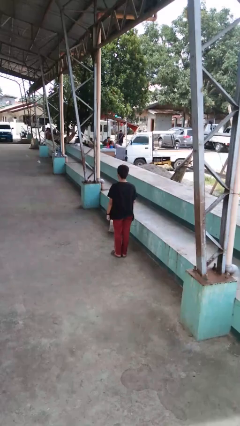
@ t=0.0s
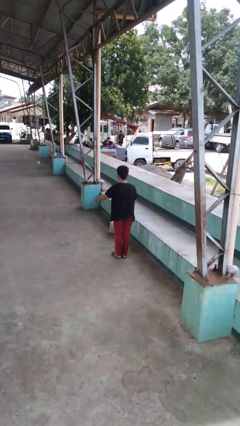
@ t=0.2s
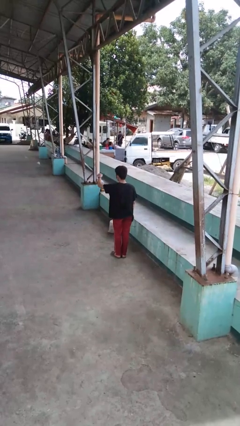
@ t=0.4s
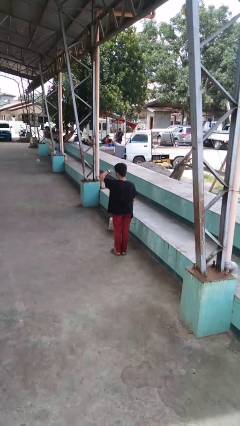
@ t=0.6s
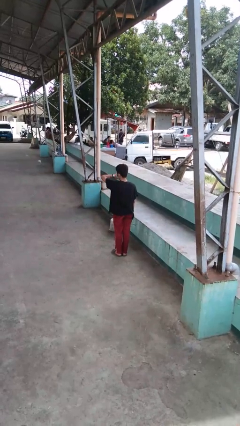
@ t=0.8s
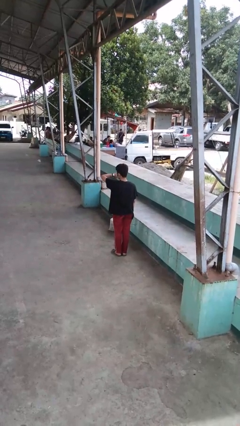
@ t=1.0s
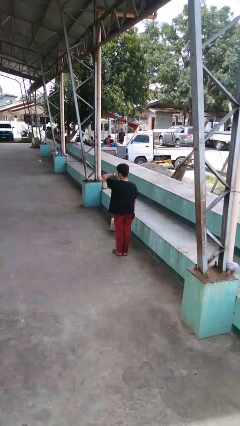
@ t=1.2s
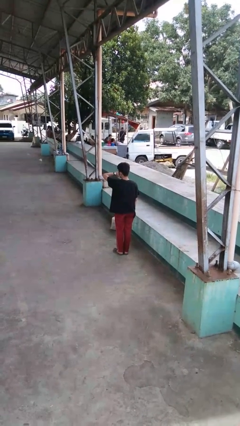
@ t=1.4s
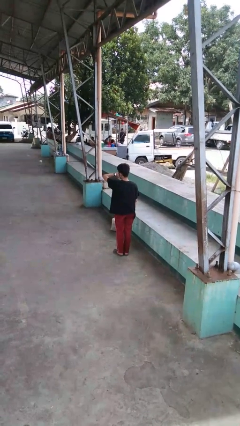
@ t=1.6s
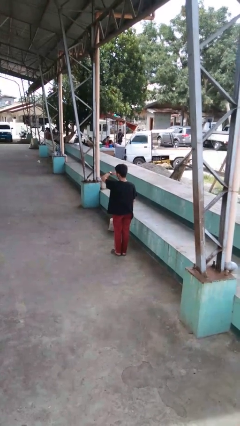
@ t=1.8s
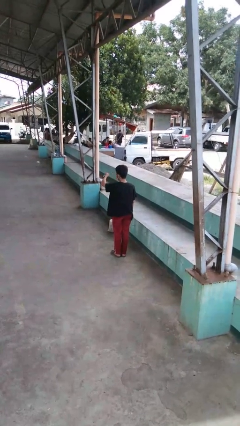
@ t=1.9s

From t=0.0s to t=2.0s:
person looks at wristwatch

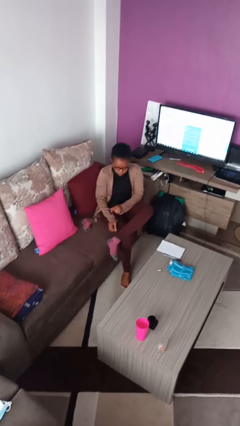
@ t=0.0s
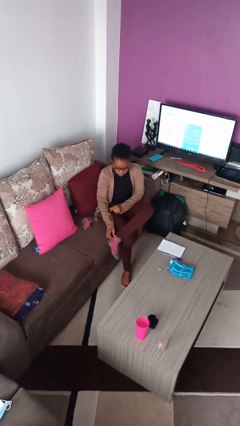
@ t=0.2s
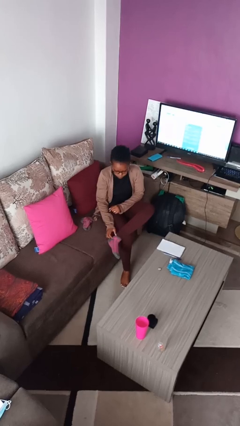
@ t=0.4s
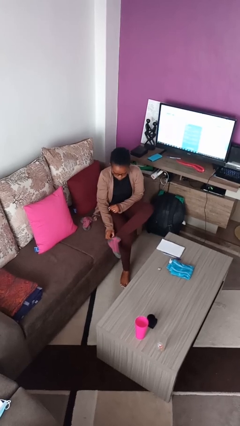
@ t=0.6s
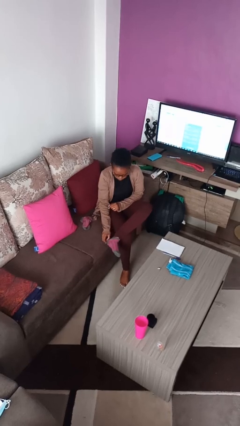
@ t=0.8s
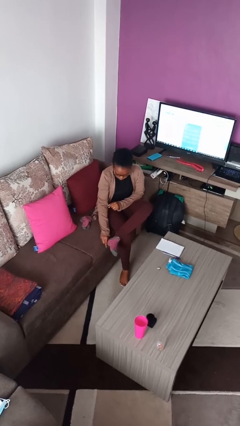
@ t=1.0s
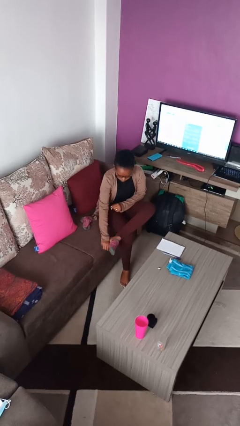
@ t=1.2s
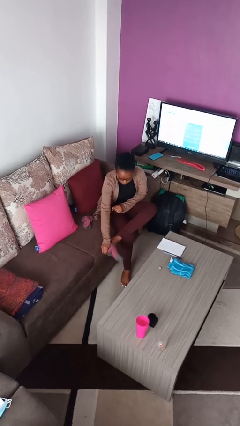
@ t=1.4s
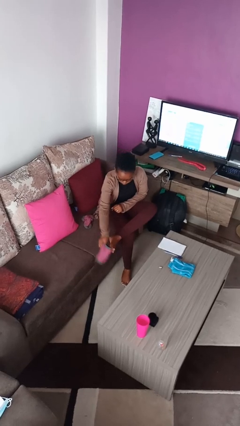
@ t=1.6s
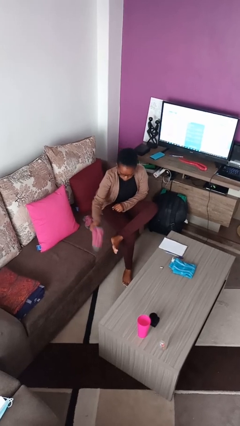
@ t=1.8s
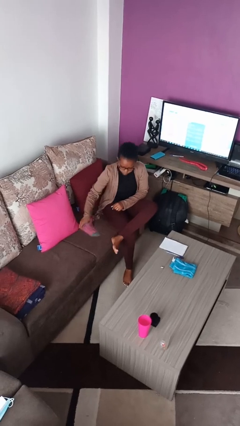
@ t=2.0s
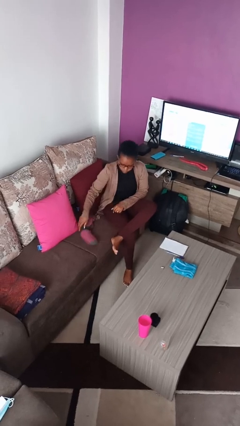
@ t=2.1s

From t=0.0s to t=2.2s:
person takes off socks

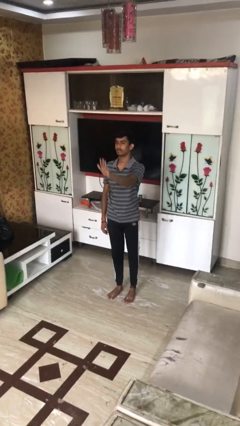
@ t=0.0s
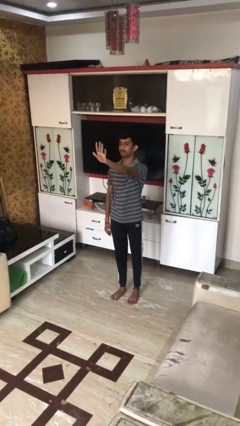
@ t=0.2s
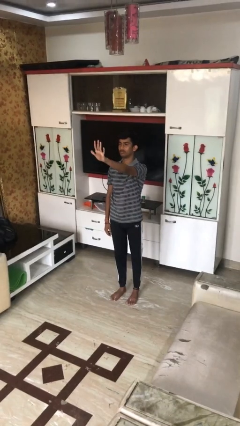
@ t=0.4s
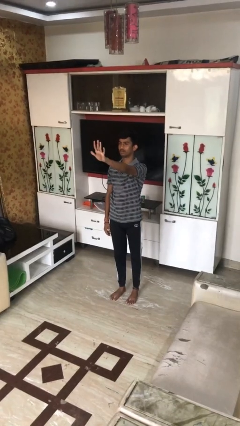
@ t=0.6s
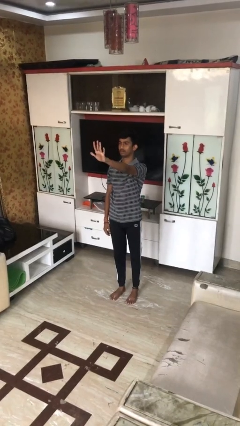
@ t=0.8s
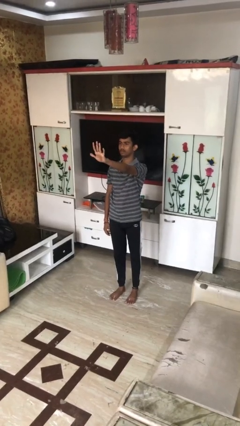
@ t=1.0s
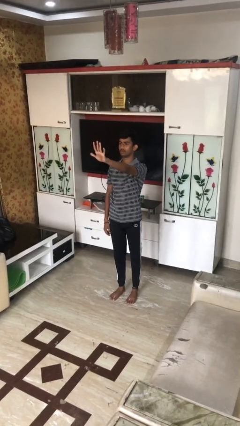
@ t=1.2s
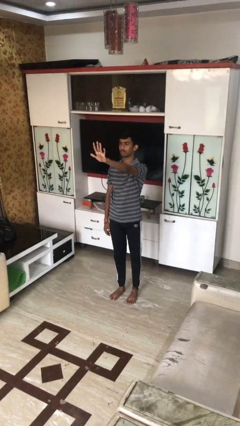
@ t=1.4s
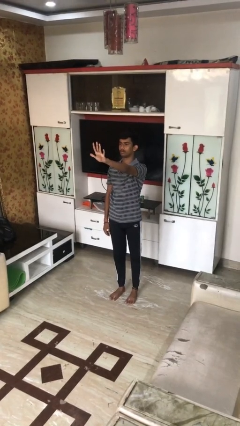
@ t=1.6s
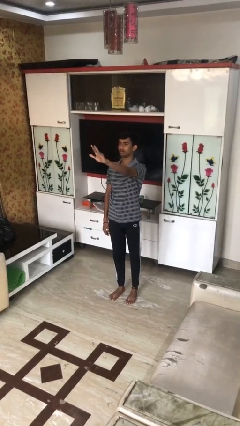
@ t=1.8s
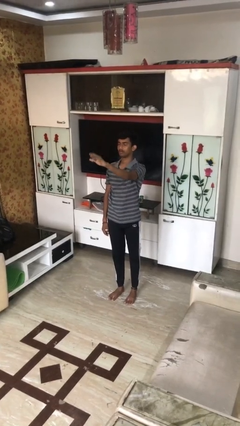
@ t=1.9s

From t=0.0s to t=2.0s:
person gestures number five

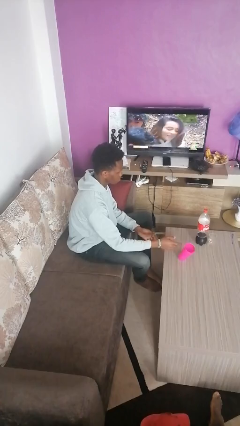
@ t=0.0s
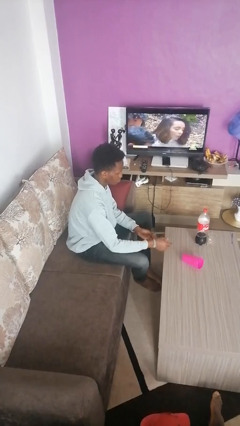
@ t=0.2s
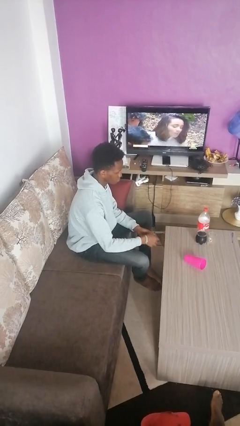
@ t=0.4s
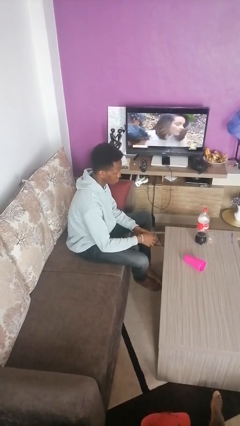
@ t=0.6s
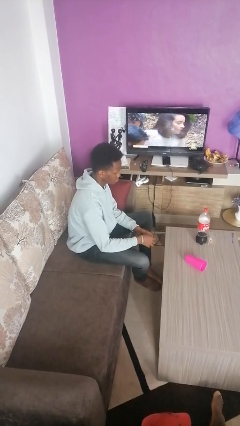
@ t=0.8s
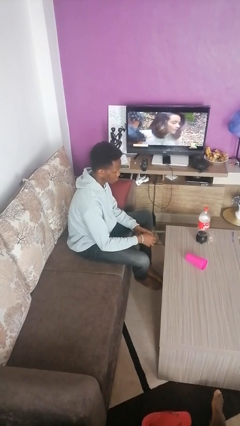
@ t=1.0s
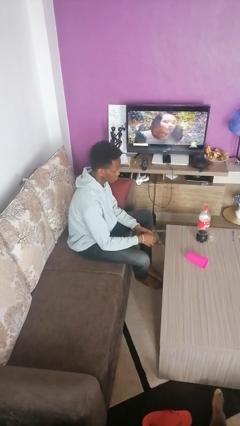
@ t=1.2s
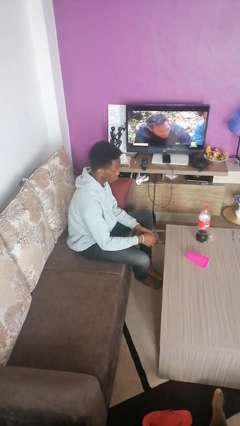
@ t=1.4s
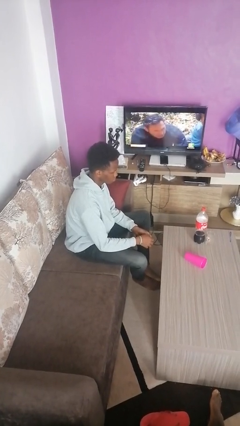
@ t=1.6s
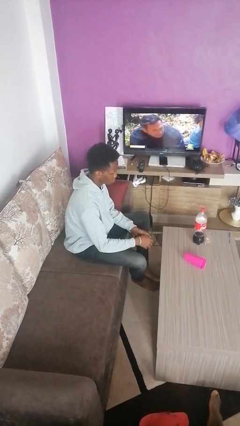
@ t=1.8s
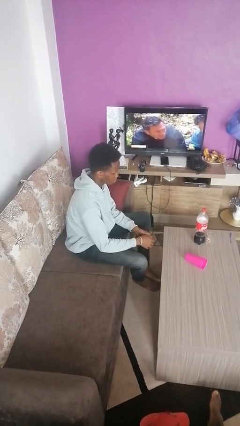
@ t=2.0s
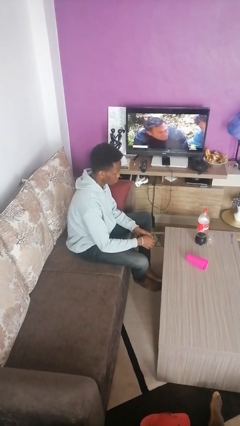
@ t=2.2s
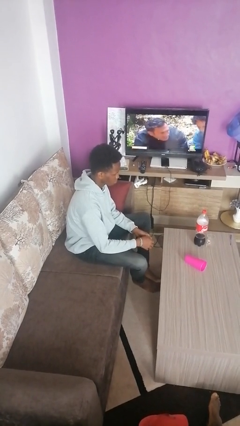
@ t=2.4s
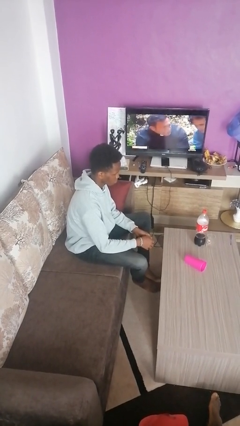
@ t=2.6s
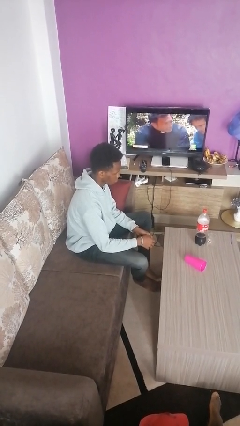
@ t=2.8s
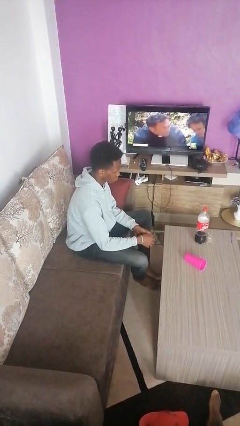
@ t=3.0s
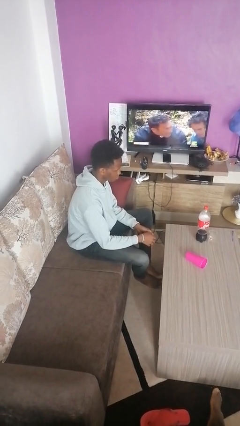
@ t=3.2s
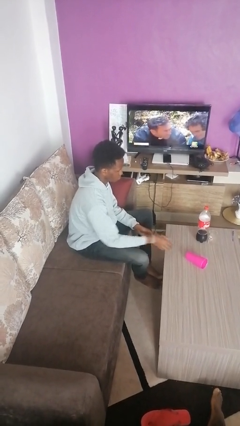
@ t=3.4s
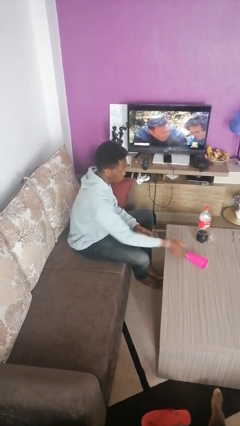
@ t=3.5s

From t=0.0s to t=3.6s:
person knocks over glass

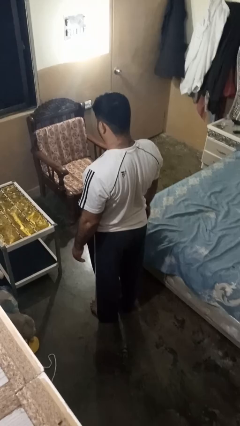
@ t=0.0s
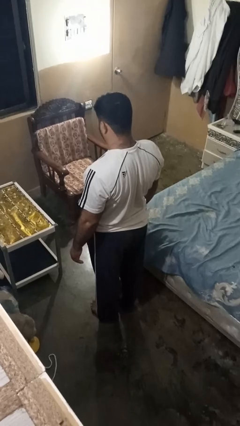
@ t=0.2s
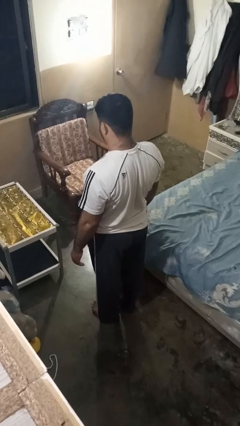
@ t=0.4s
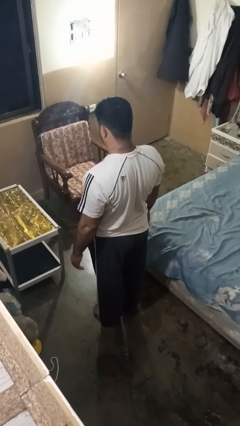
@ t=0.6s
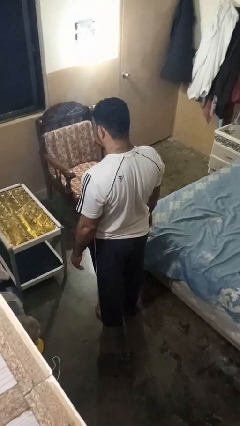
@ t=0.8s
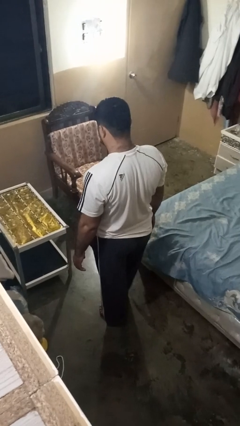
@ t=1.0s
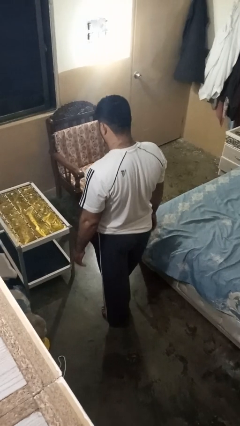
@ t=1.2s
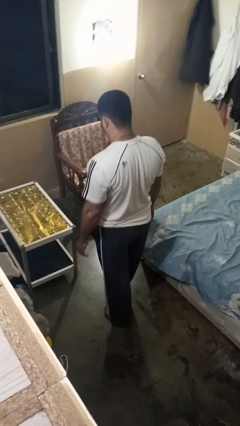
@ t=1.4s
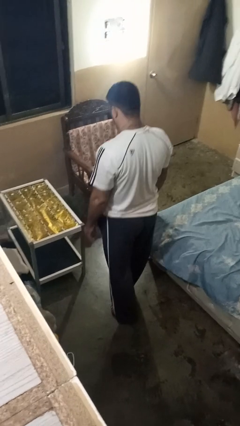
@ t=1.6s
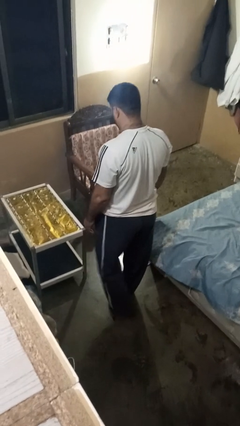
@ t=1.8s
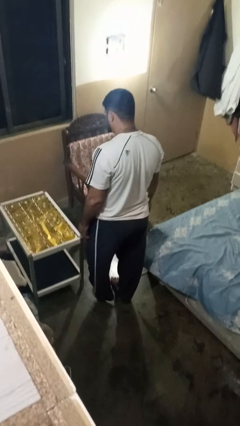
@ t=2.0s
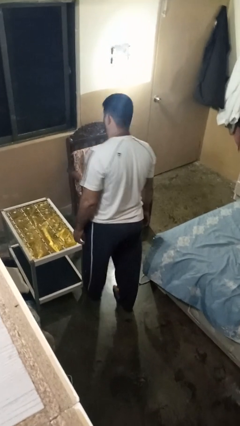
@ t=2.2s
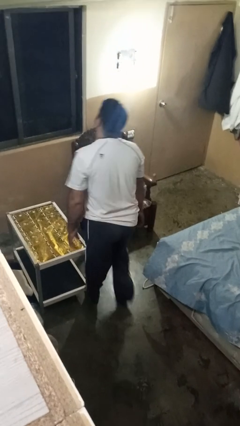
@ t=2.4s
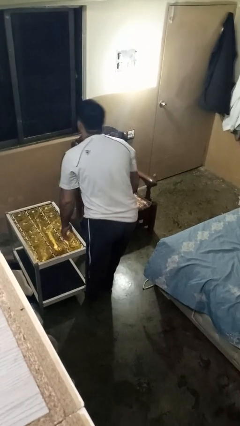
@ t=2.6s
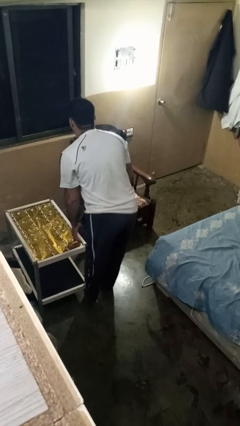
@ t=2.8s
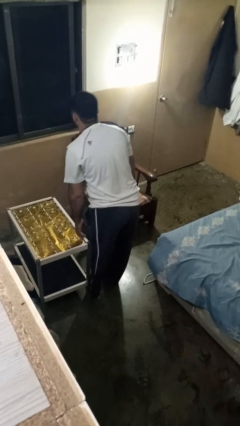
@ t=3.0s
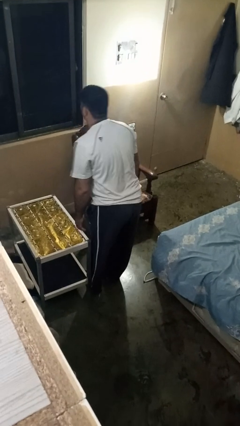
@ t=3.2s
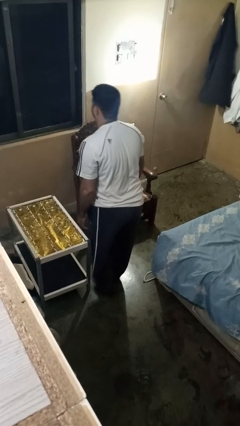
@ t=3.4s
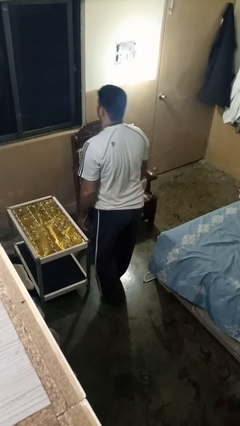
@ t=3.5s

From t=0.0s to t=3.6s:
person bumps into table

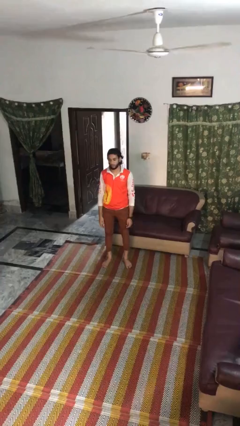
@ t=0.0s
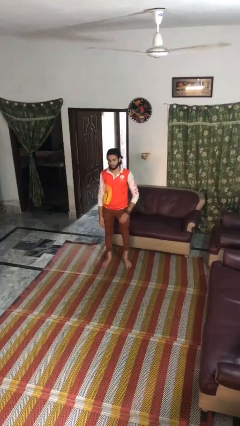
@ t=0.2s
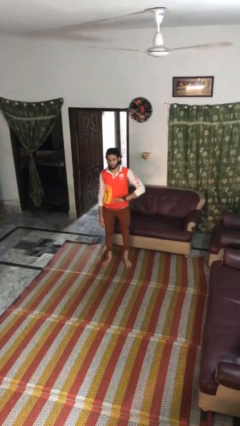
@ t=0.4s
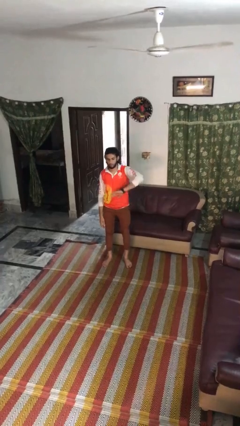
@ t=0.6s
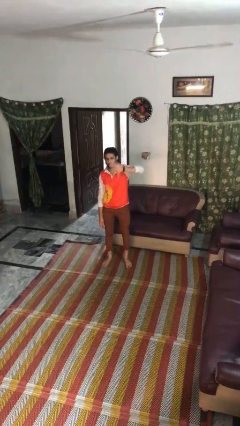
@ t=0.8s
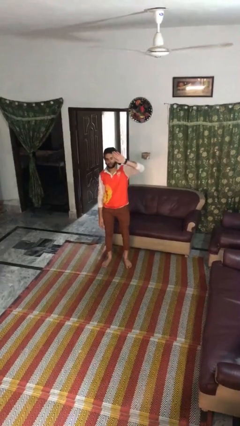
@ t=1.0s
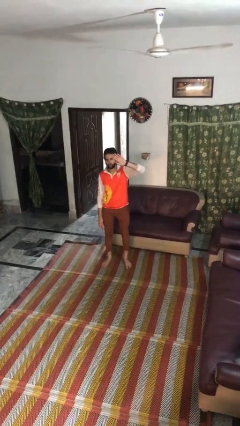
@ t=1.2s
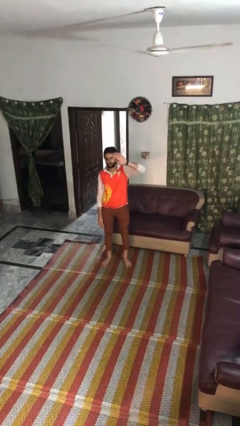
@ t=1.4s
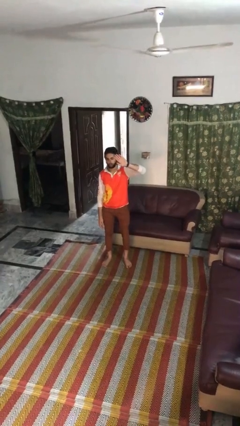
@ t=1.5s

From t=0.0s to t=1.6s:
person gestures swipe up

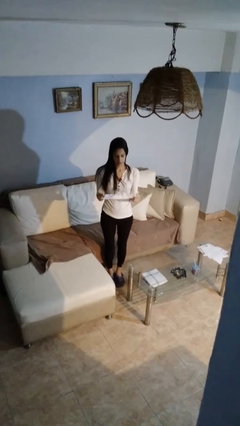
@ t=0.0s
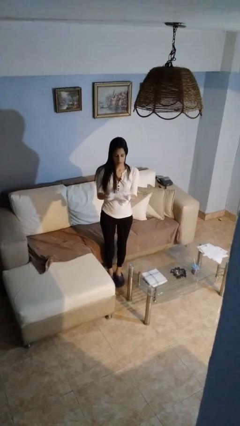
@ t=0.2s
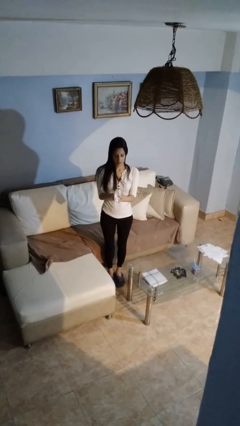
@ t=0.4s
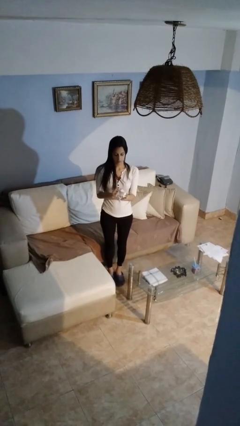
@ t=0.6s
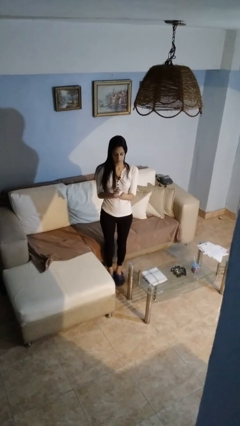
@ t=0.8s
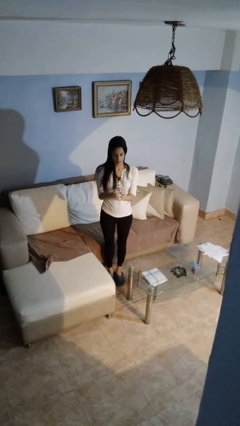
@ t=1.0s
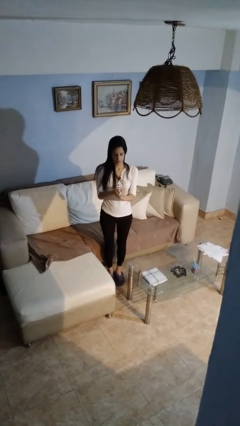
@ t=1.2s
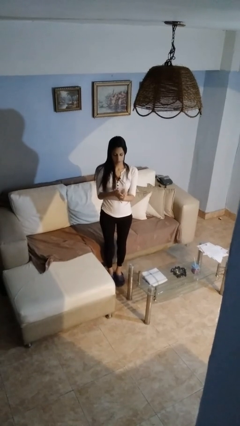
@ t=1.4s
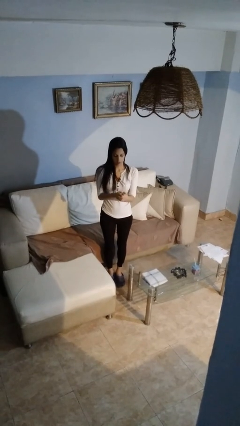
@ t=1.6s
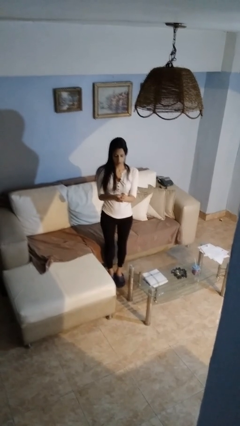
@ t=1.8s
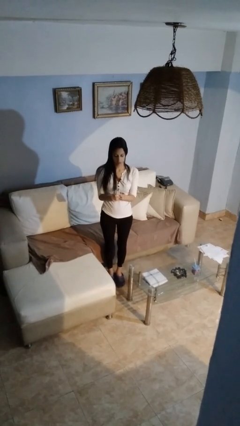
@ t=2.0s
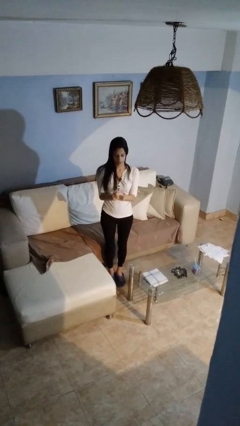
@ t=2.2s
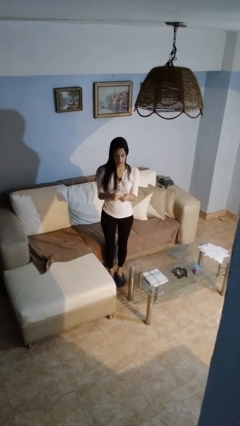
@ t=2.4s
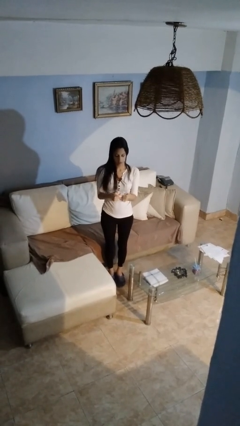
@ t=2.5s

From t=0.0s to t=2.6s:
person crumples paper
